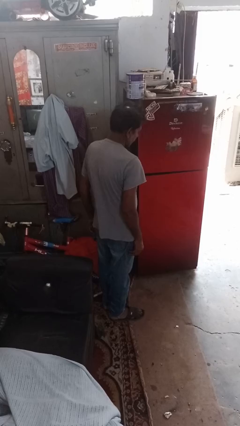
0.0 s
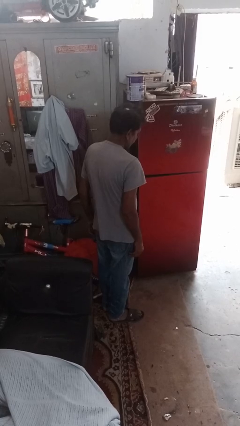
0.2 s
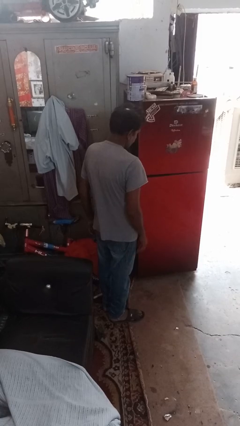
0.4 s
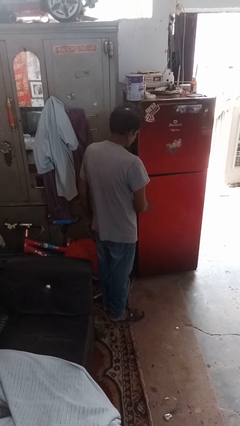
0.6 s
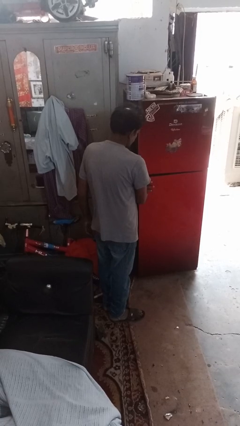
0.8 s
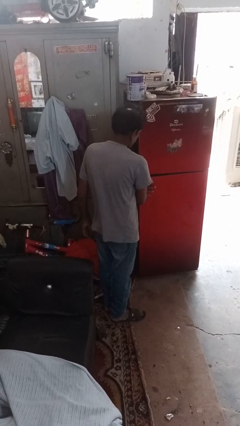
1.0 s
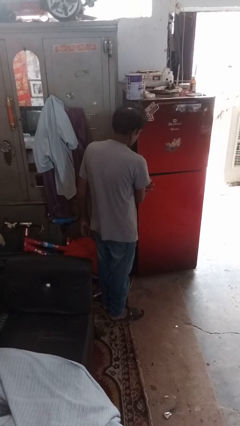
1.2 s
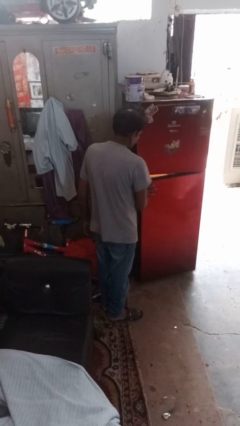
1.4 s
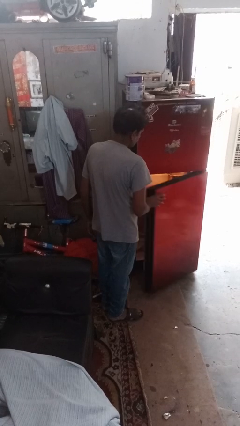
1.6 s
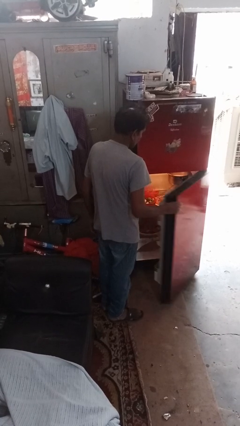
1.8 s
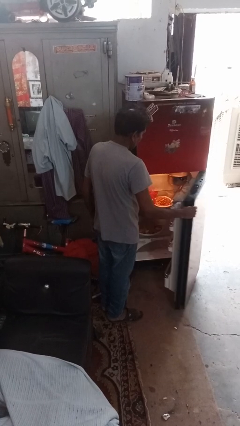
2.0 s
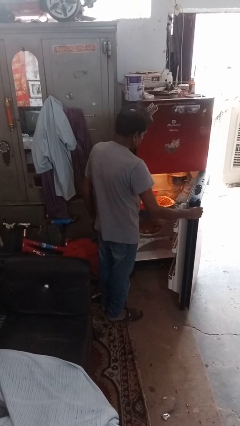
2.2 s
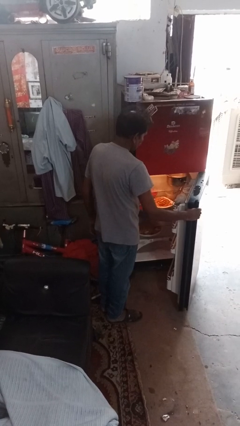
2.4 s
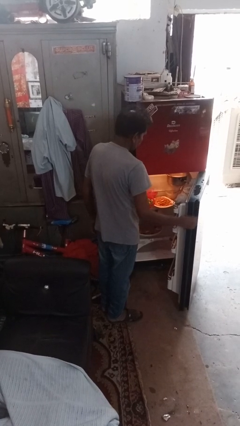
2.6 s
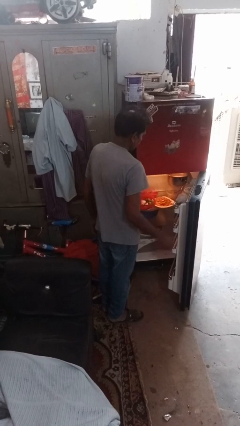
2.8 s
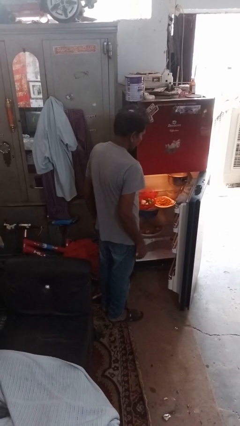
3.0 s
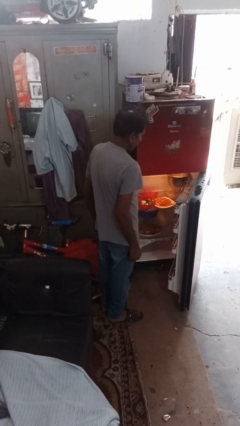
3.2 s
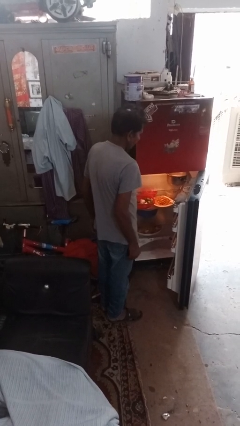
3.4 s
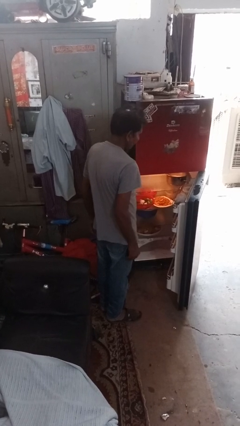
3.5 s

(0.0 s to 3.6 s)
person opens refrigerator

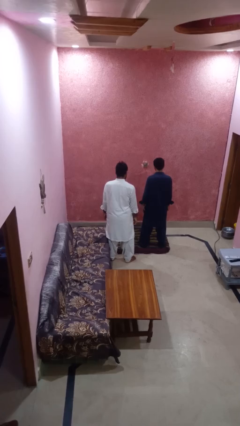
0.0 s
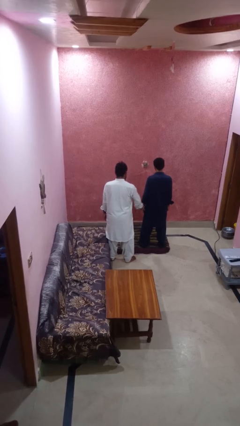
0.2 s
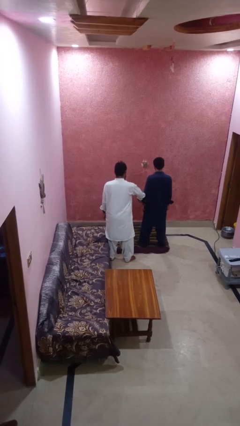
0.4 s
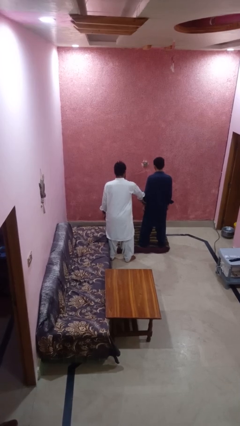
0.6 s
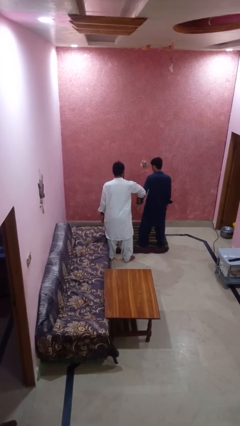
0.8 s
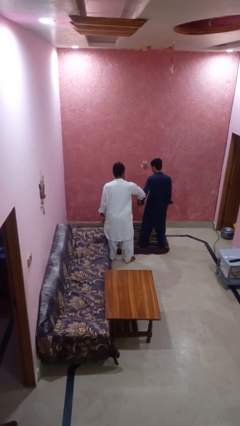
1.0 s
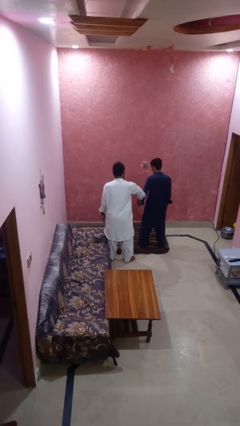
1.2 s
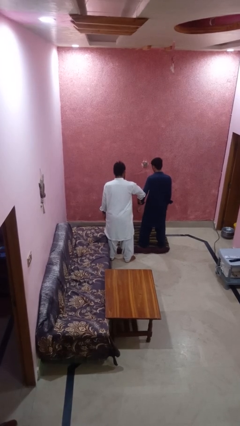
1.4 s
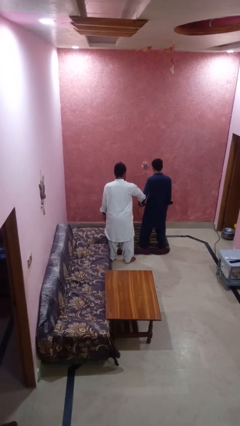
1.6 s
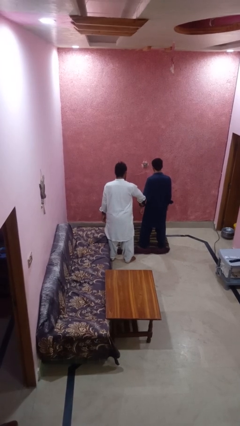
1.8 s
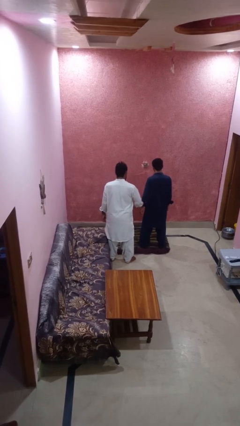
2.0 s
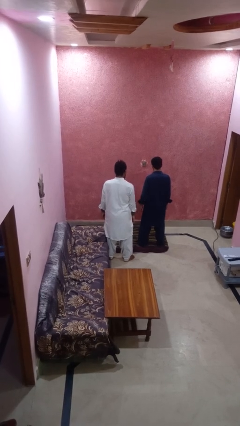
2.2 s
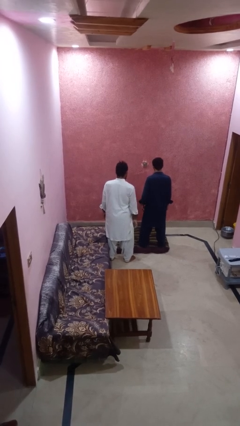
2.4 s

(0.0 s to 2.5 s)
person grabs person by bicep

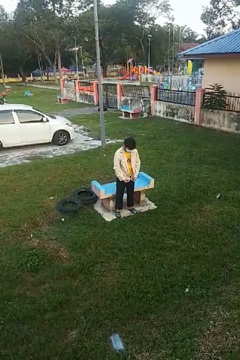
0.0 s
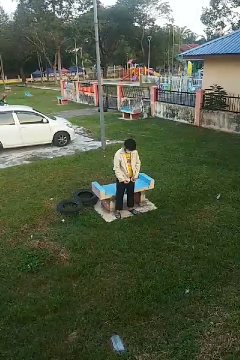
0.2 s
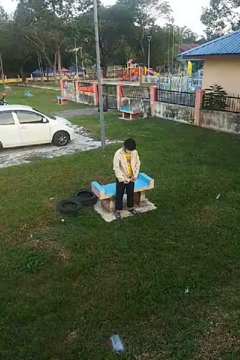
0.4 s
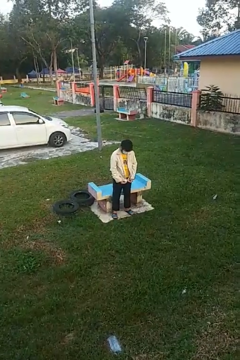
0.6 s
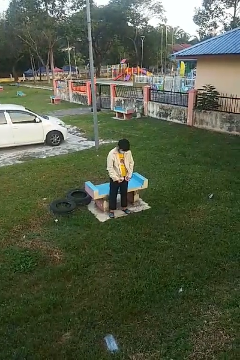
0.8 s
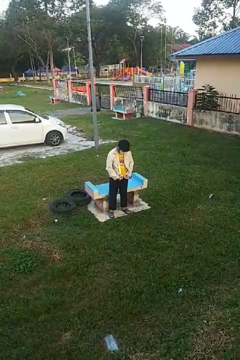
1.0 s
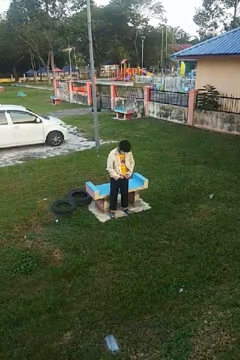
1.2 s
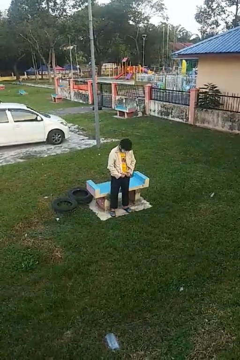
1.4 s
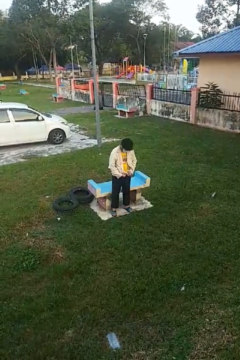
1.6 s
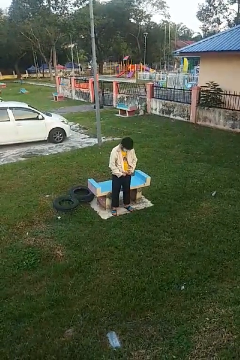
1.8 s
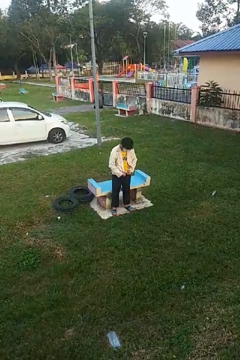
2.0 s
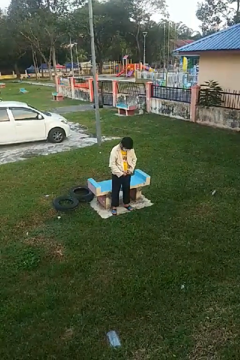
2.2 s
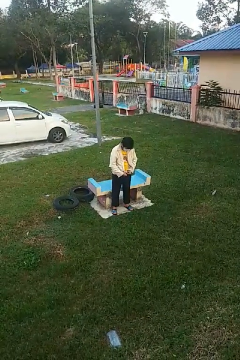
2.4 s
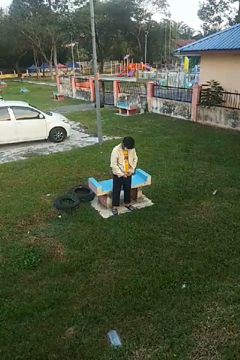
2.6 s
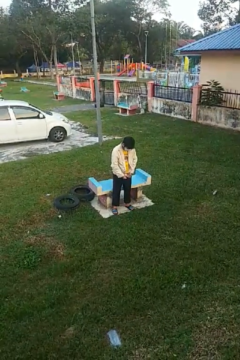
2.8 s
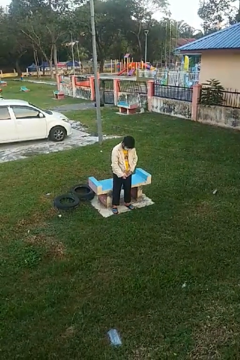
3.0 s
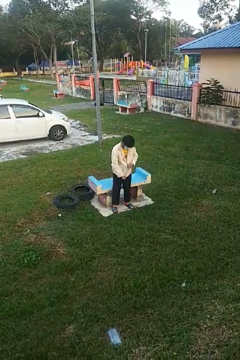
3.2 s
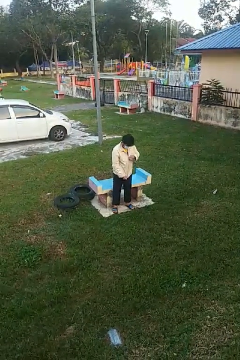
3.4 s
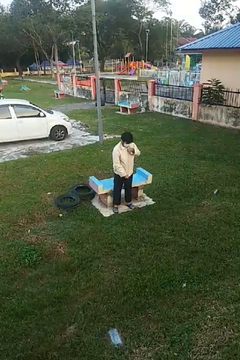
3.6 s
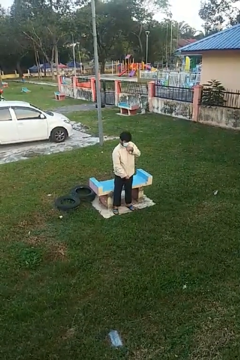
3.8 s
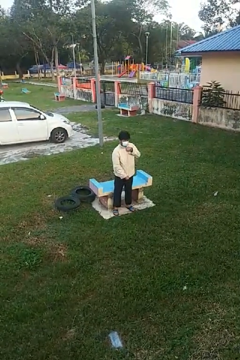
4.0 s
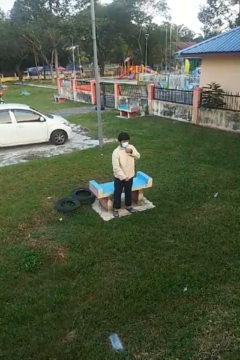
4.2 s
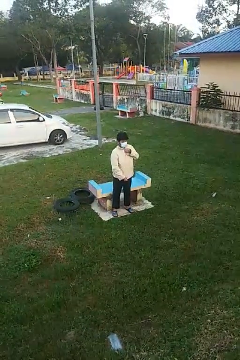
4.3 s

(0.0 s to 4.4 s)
person zips up jacket

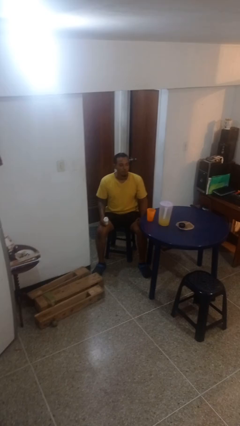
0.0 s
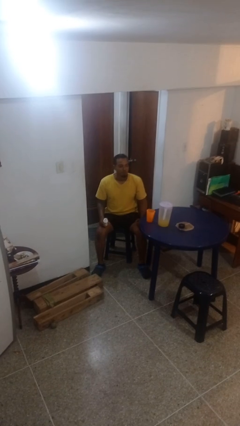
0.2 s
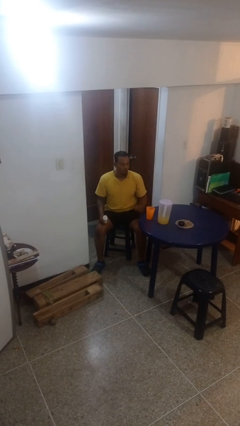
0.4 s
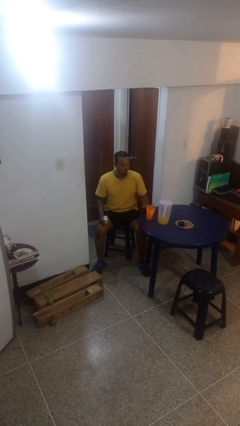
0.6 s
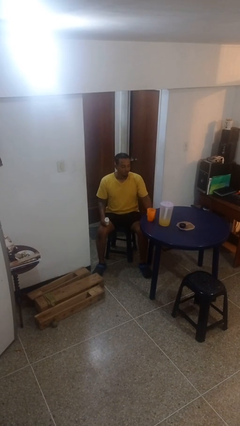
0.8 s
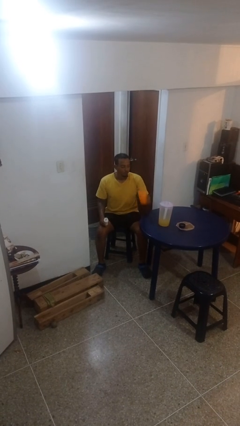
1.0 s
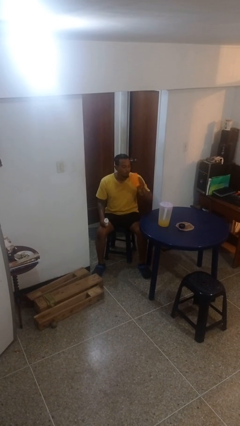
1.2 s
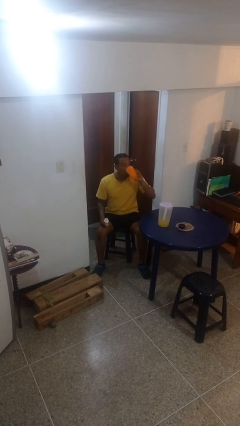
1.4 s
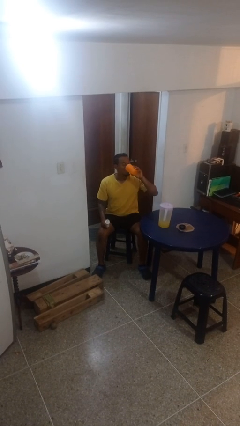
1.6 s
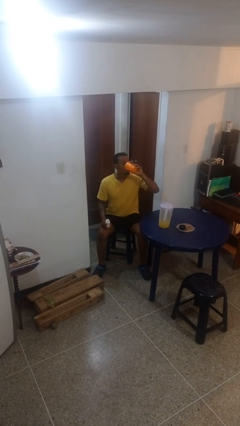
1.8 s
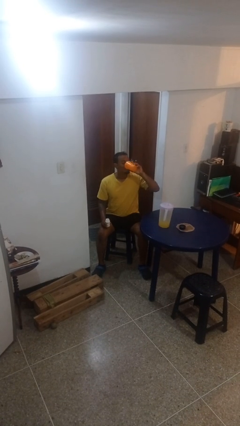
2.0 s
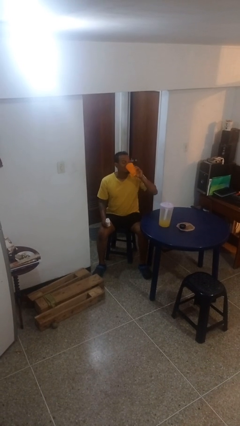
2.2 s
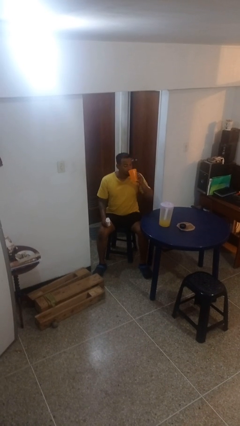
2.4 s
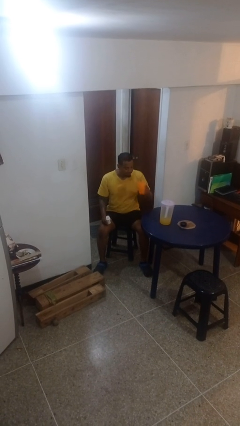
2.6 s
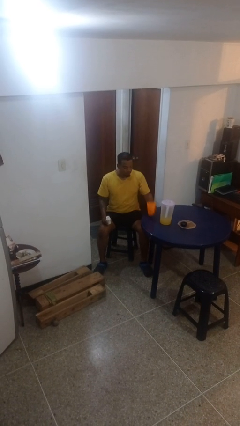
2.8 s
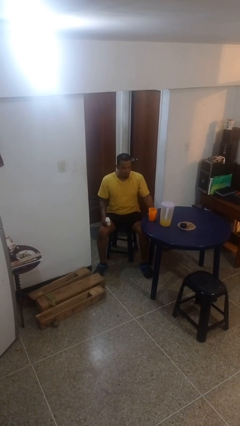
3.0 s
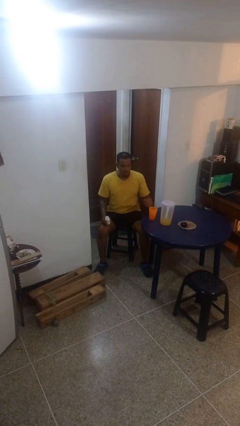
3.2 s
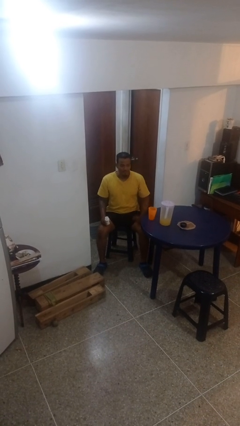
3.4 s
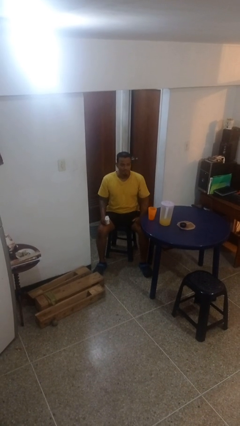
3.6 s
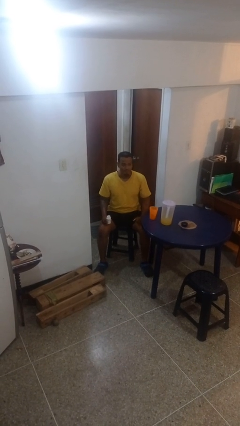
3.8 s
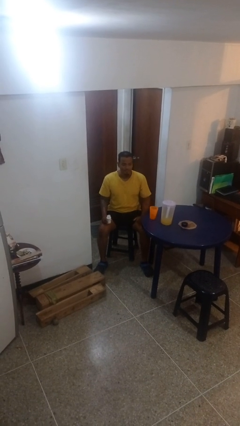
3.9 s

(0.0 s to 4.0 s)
person drinks from cup

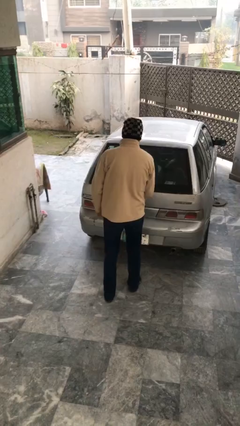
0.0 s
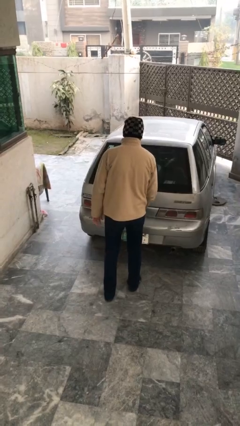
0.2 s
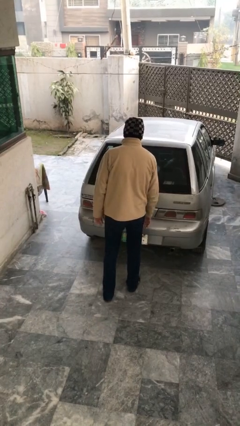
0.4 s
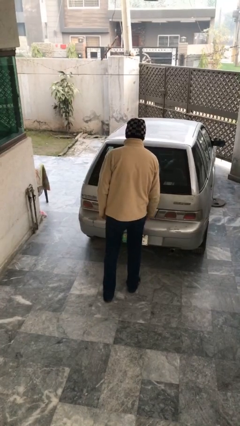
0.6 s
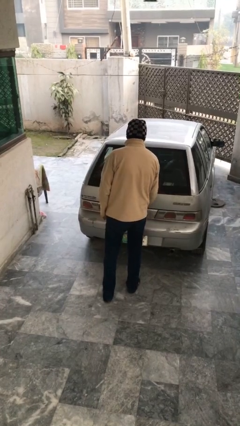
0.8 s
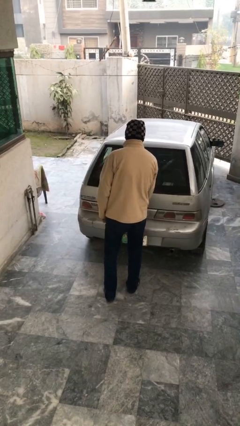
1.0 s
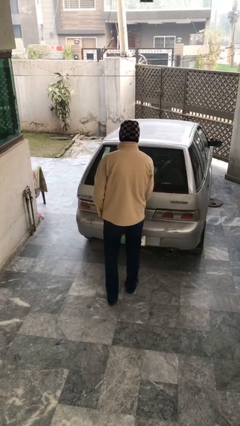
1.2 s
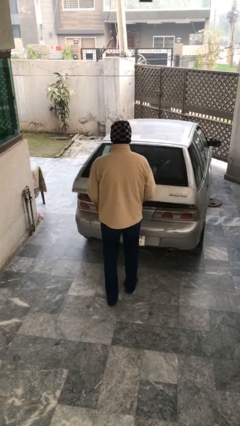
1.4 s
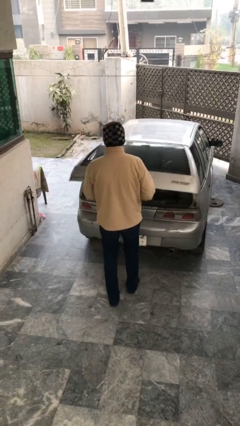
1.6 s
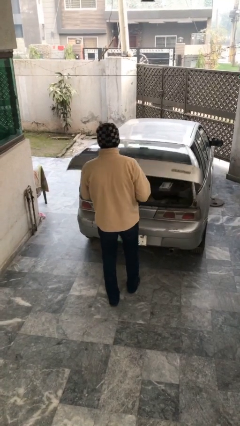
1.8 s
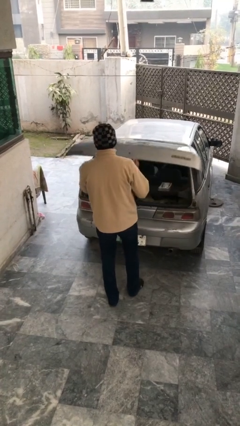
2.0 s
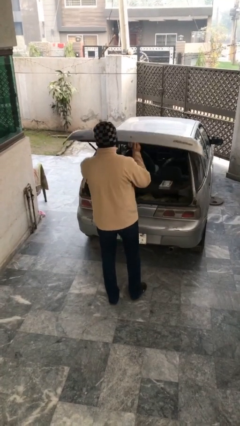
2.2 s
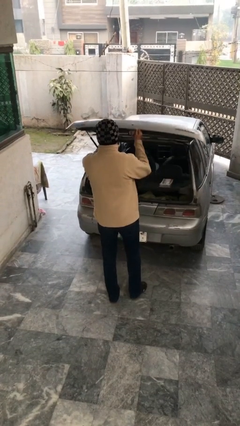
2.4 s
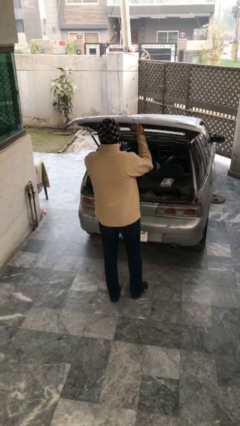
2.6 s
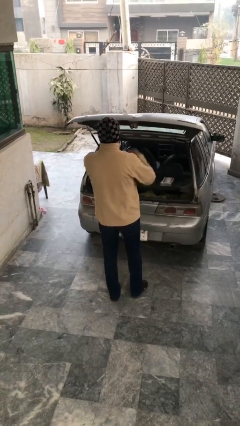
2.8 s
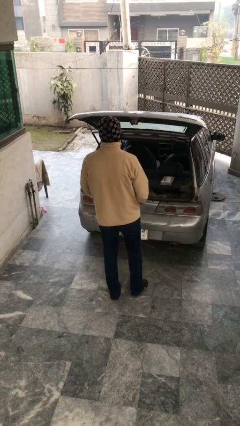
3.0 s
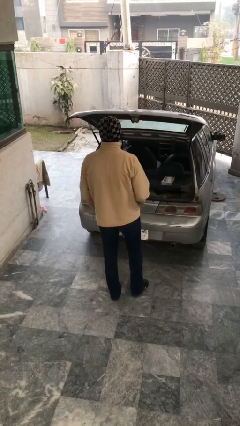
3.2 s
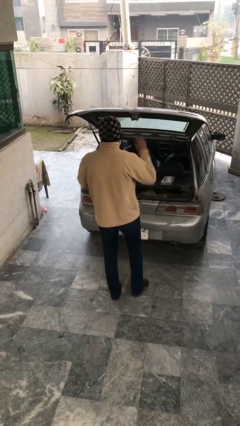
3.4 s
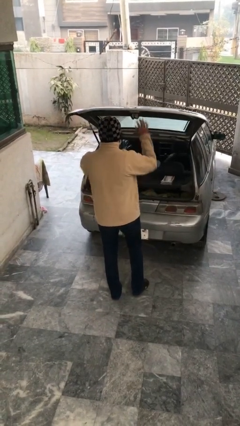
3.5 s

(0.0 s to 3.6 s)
person opens car trunk
